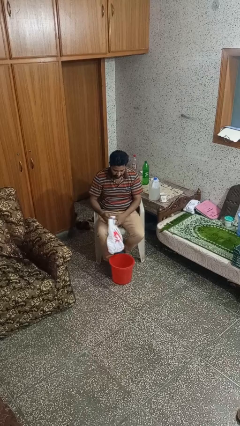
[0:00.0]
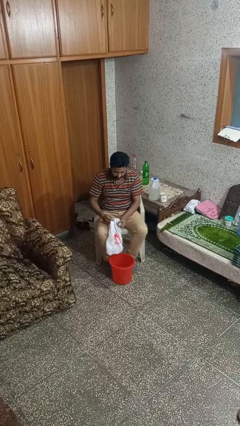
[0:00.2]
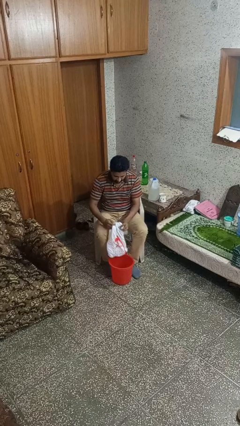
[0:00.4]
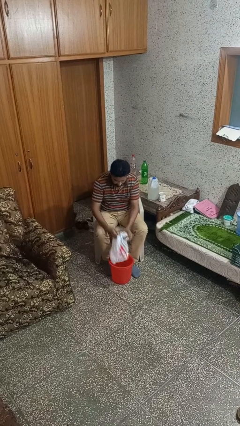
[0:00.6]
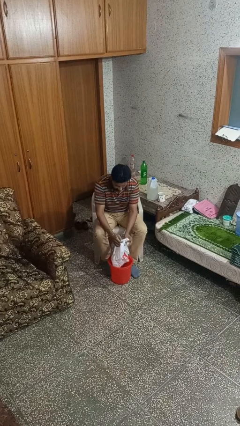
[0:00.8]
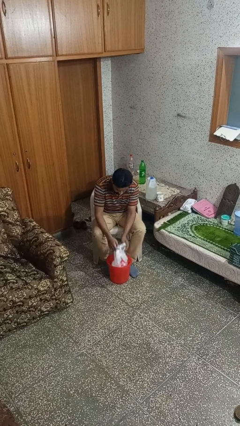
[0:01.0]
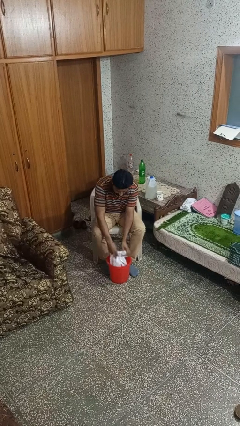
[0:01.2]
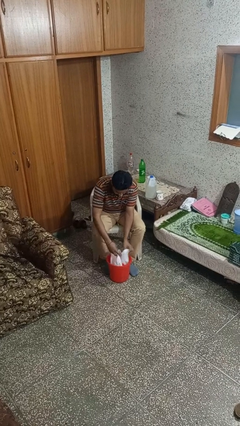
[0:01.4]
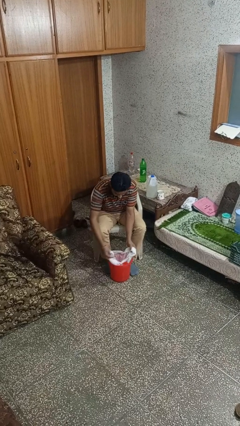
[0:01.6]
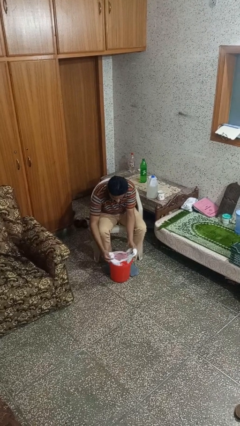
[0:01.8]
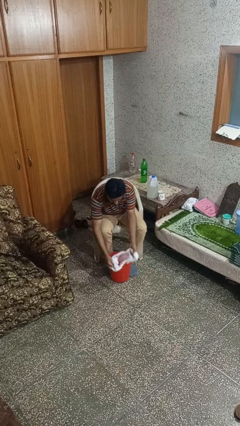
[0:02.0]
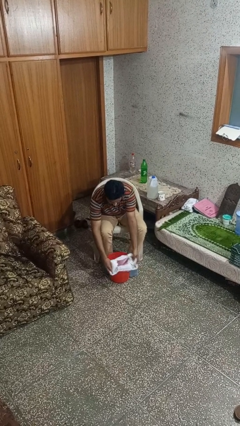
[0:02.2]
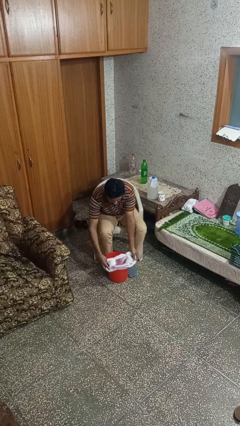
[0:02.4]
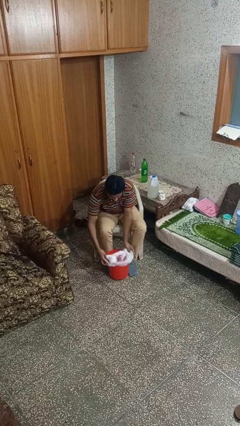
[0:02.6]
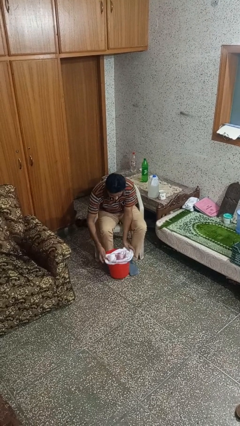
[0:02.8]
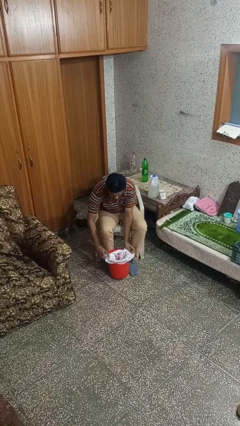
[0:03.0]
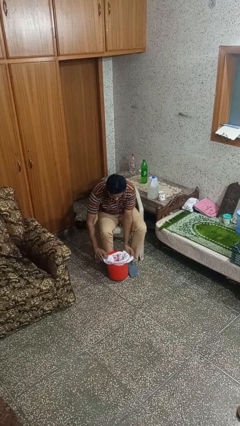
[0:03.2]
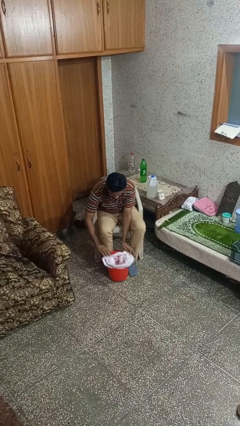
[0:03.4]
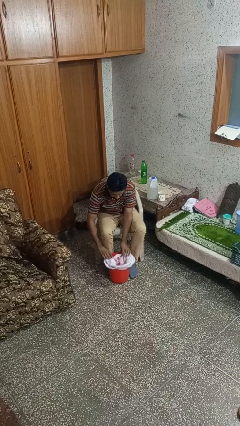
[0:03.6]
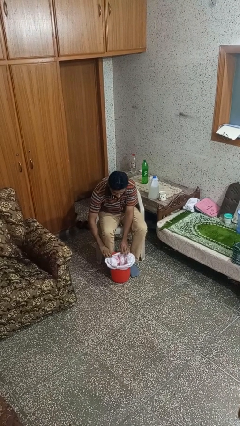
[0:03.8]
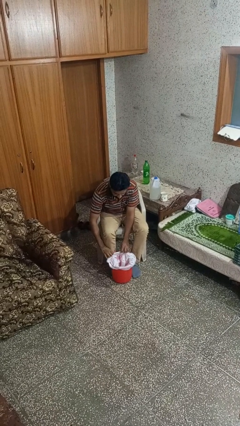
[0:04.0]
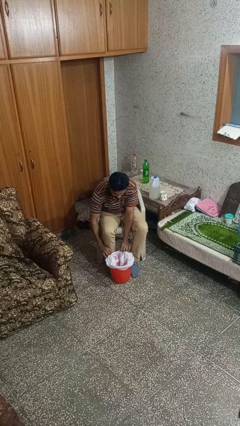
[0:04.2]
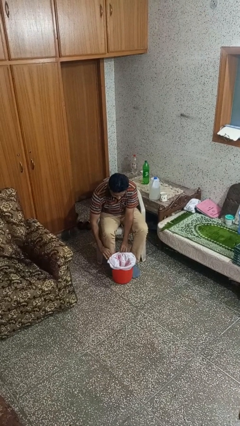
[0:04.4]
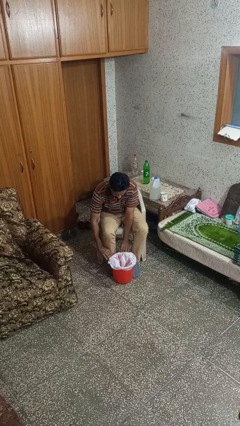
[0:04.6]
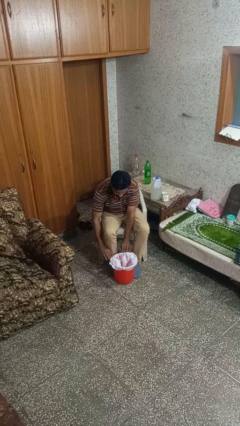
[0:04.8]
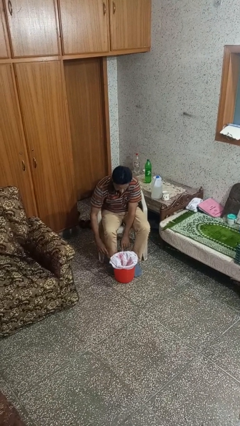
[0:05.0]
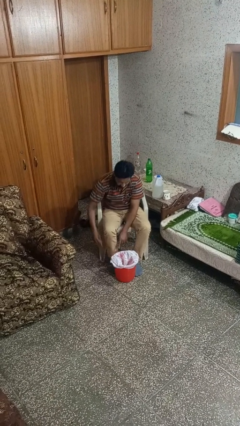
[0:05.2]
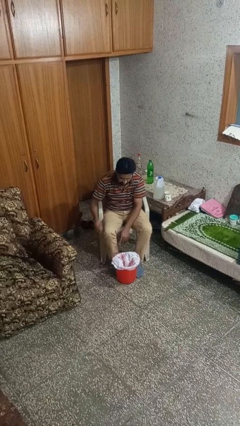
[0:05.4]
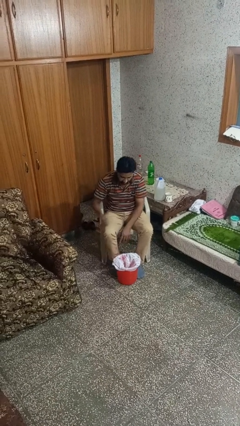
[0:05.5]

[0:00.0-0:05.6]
person inserts trashbag into trashcan

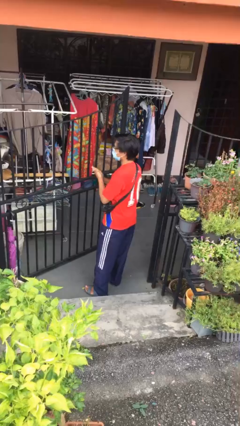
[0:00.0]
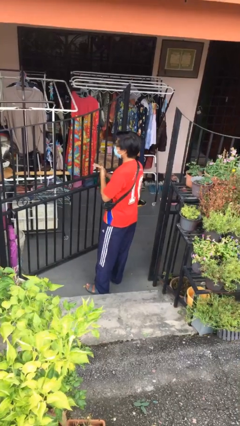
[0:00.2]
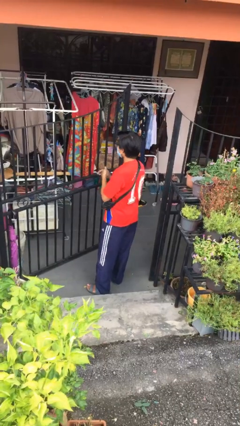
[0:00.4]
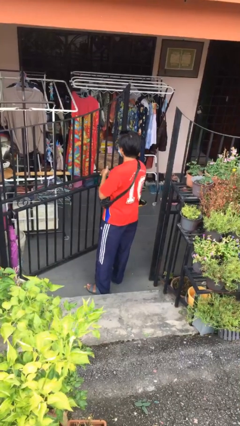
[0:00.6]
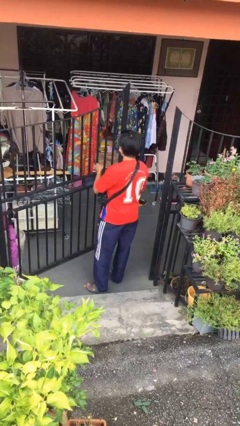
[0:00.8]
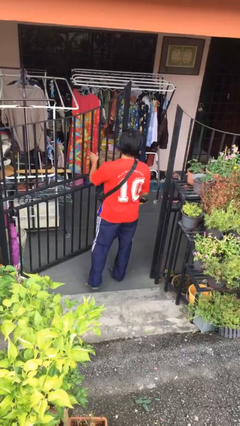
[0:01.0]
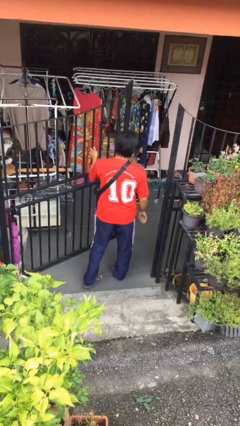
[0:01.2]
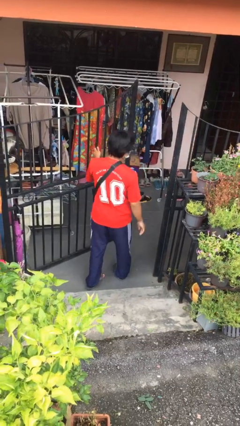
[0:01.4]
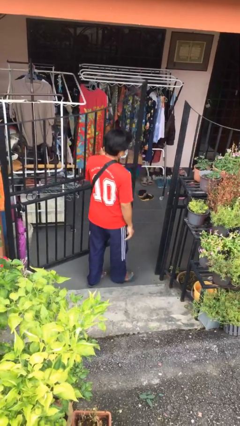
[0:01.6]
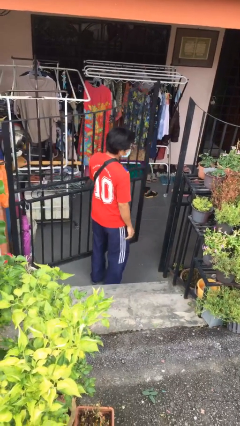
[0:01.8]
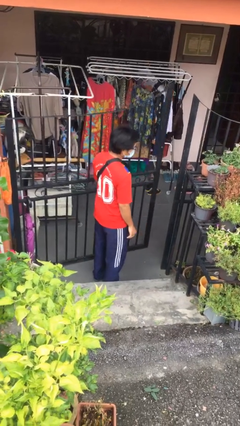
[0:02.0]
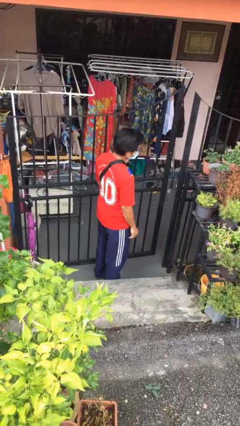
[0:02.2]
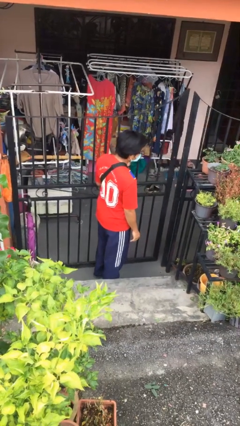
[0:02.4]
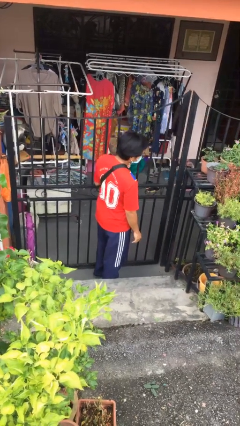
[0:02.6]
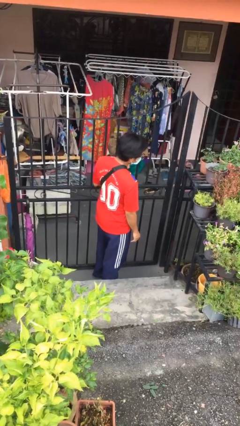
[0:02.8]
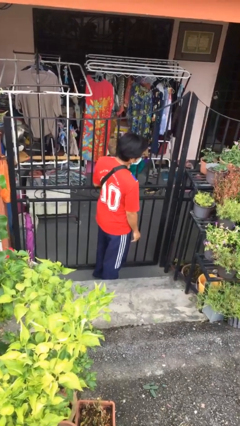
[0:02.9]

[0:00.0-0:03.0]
person closes facility door

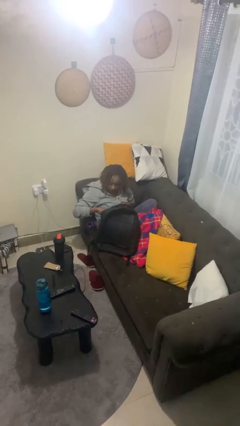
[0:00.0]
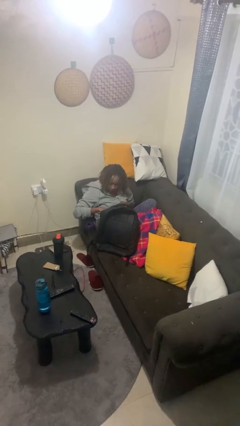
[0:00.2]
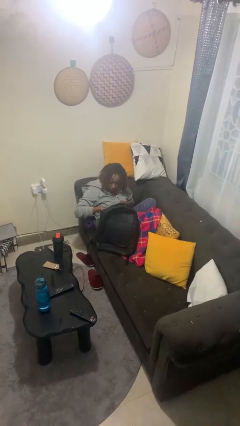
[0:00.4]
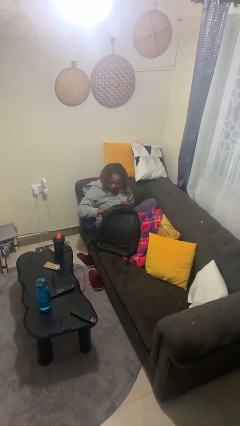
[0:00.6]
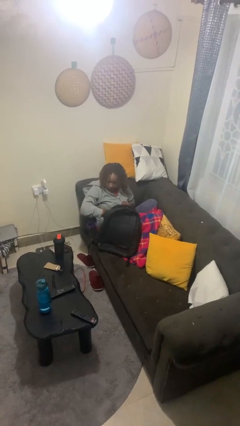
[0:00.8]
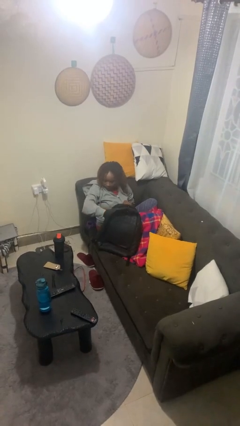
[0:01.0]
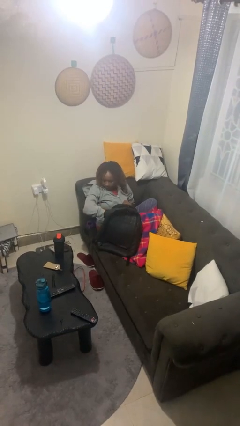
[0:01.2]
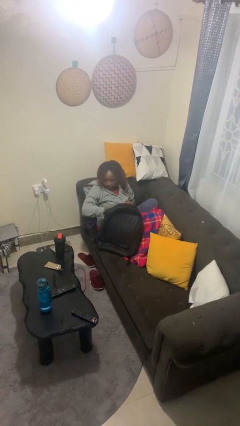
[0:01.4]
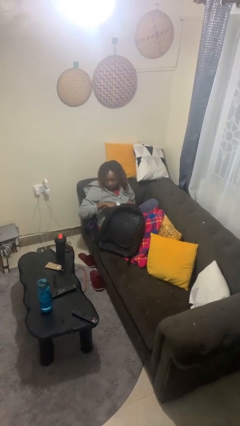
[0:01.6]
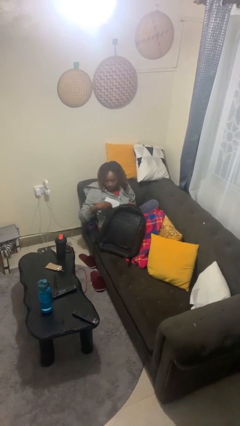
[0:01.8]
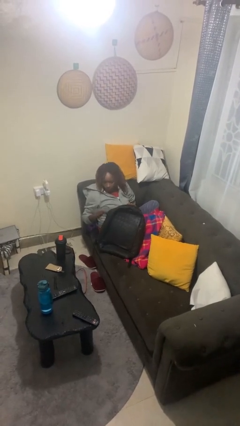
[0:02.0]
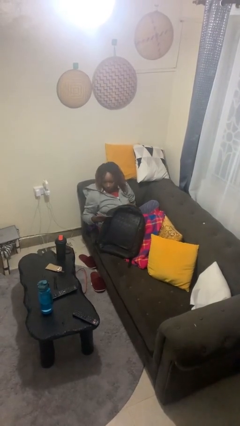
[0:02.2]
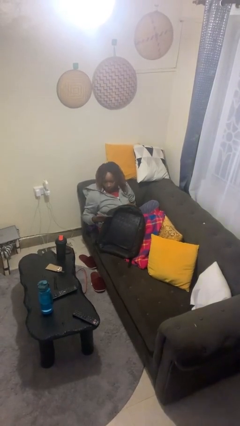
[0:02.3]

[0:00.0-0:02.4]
person takes object from backpack

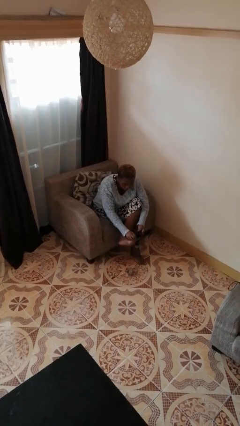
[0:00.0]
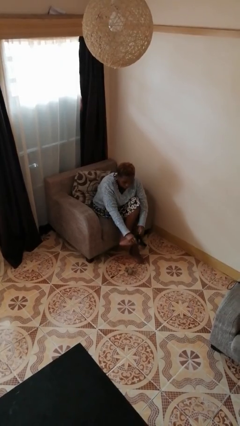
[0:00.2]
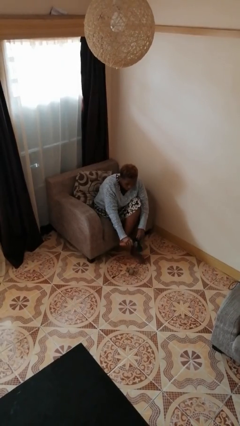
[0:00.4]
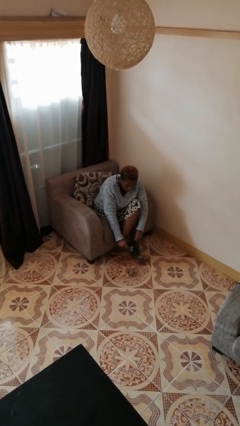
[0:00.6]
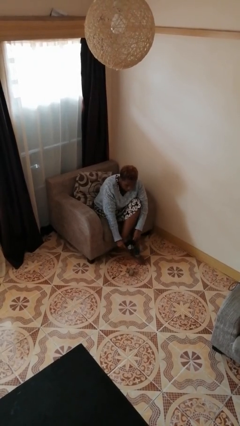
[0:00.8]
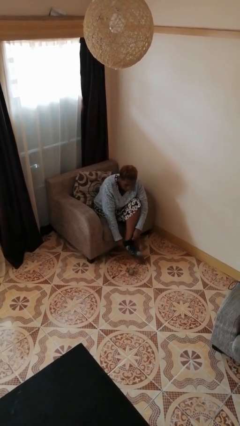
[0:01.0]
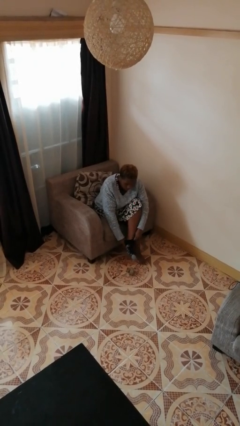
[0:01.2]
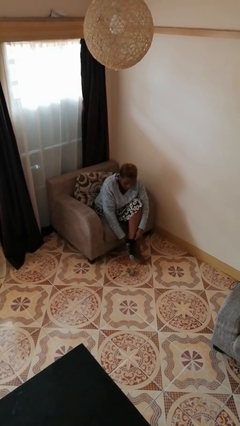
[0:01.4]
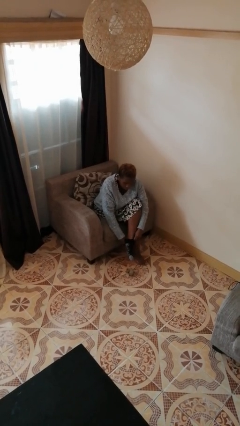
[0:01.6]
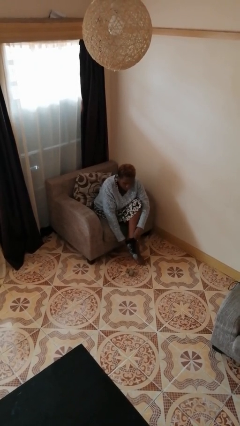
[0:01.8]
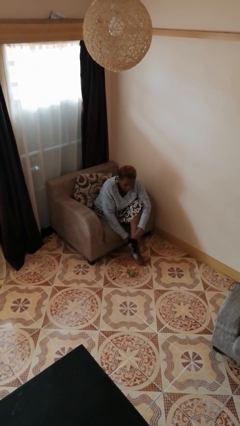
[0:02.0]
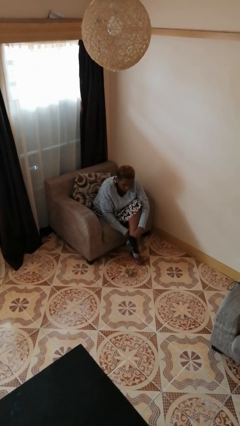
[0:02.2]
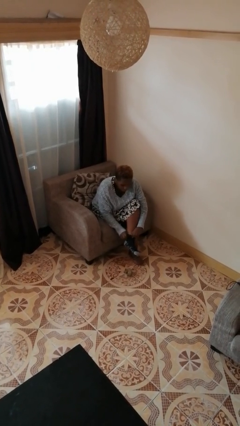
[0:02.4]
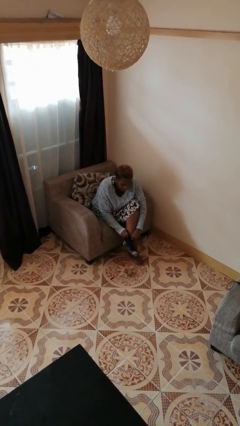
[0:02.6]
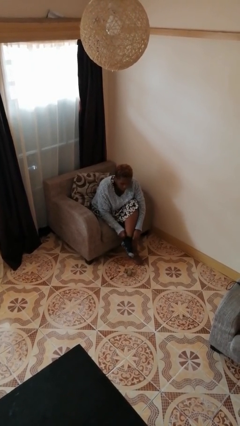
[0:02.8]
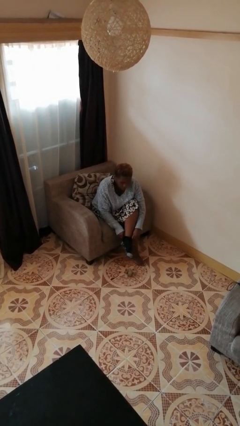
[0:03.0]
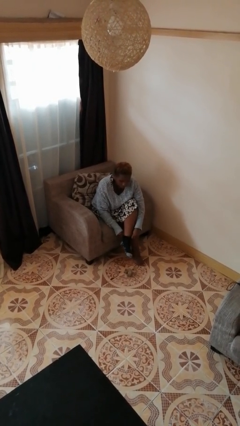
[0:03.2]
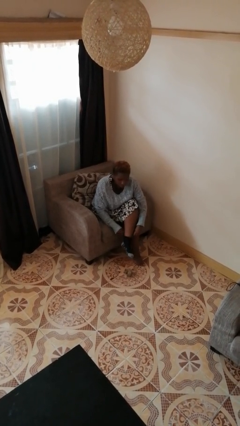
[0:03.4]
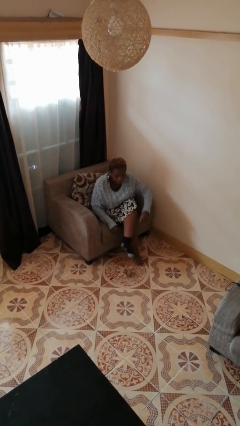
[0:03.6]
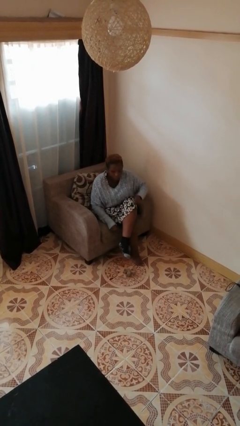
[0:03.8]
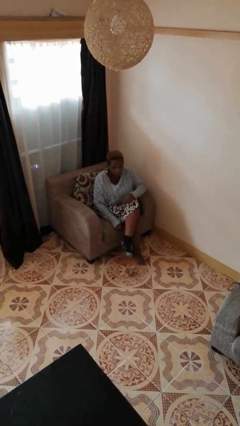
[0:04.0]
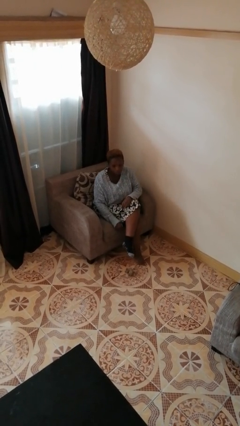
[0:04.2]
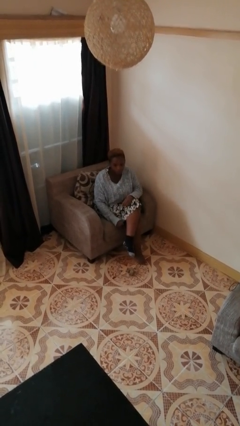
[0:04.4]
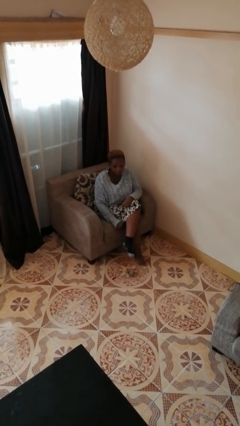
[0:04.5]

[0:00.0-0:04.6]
person puts on socks

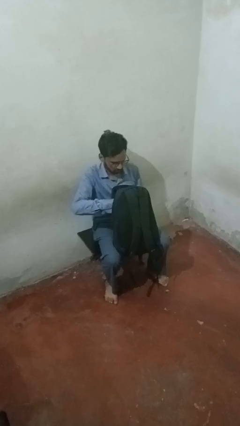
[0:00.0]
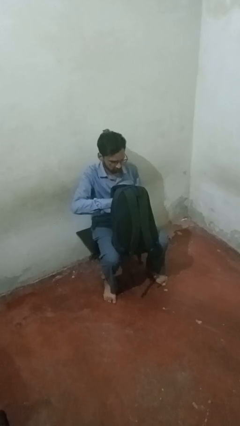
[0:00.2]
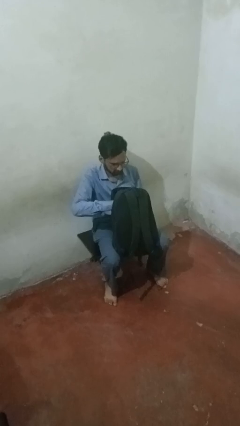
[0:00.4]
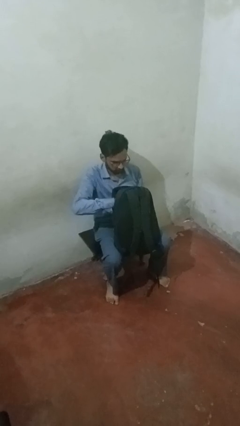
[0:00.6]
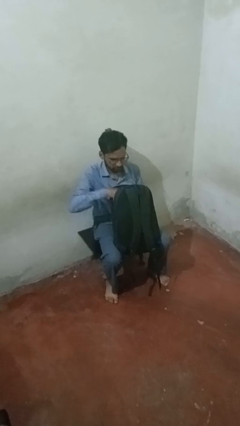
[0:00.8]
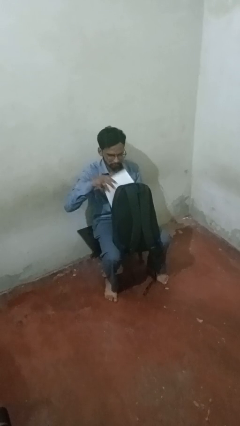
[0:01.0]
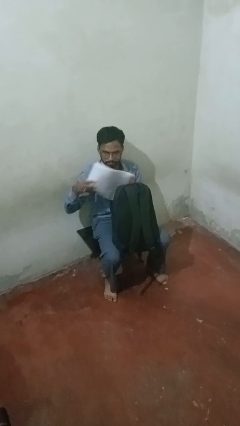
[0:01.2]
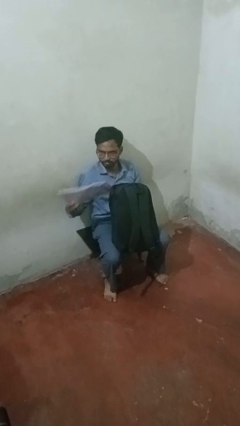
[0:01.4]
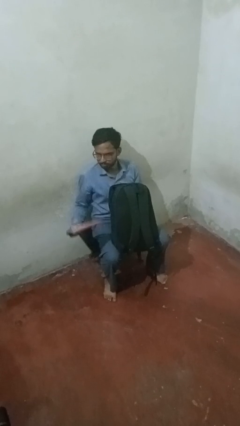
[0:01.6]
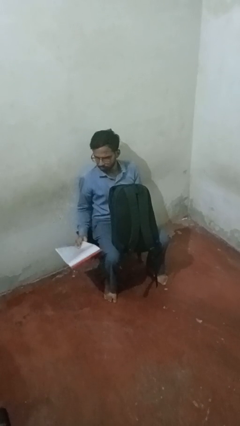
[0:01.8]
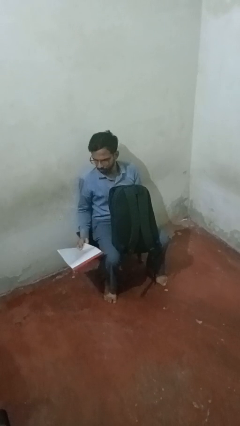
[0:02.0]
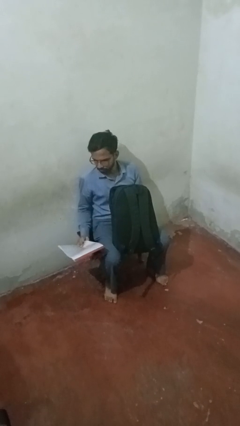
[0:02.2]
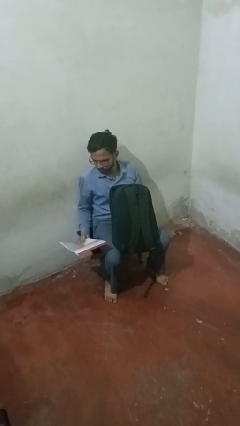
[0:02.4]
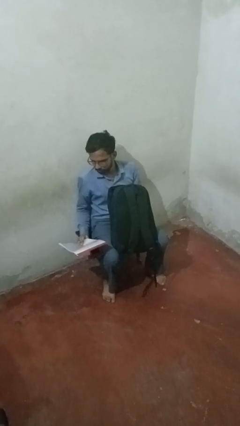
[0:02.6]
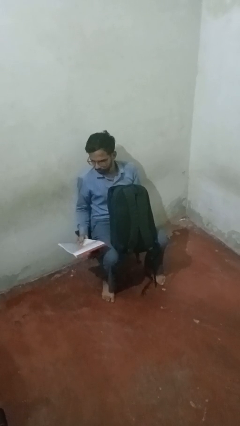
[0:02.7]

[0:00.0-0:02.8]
person takes object from purse
